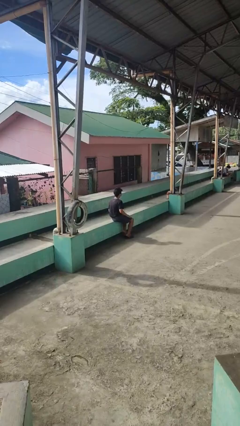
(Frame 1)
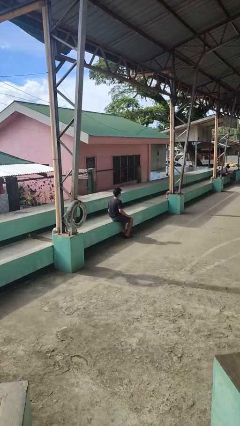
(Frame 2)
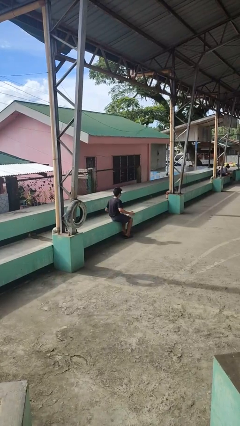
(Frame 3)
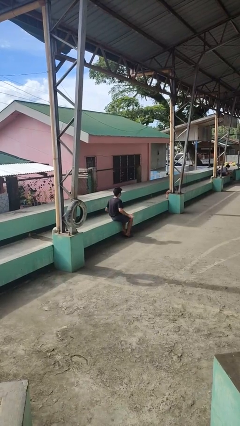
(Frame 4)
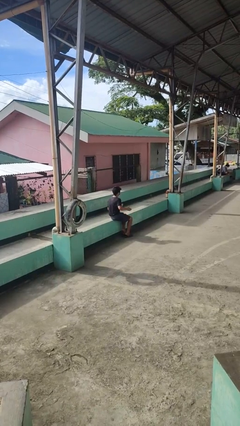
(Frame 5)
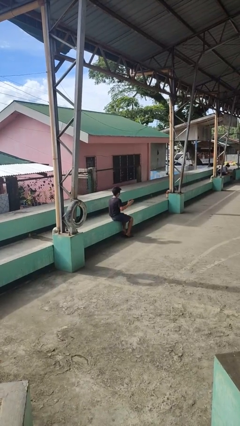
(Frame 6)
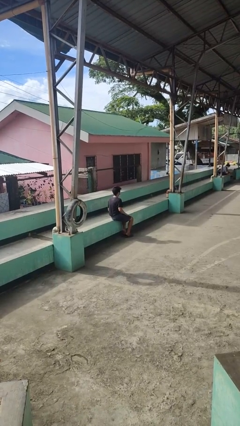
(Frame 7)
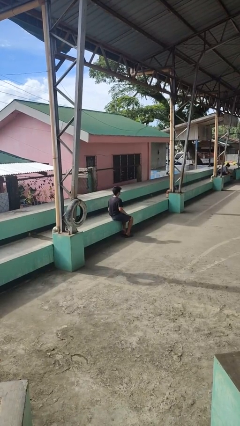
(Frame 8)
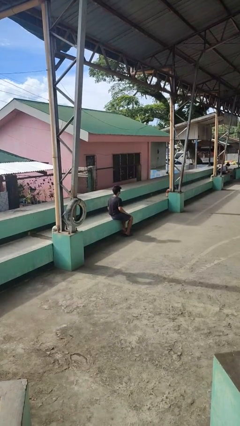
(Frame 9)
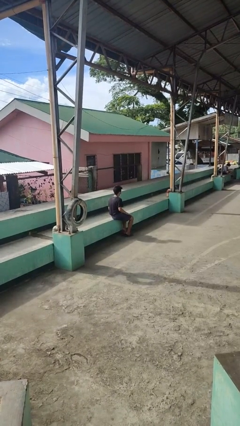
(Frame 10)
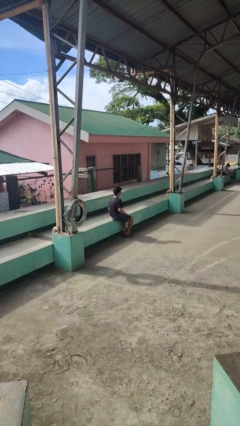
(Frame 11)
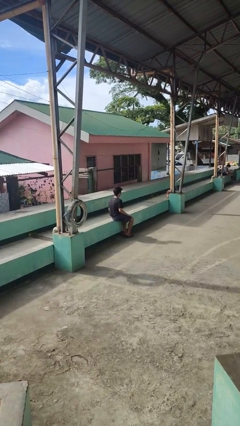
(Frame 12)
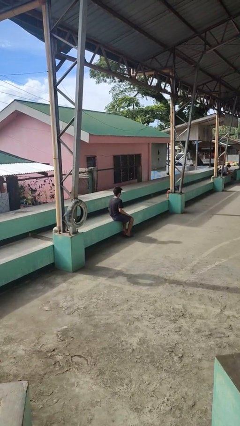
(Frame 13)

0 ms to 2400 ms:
person slaps hands on thighs

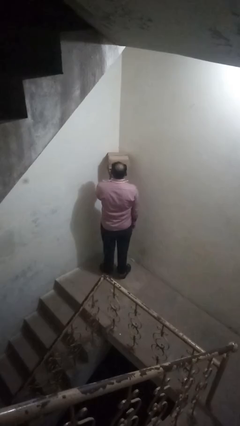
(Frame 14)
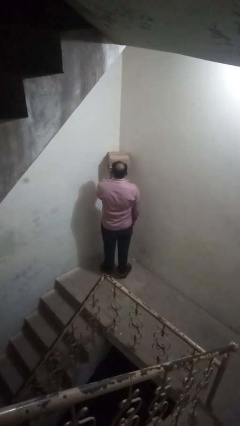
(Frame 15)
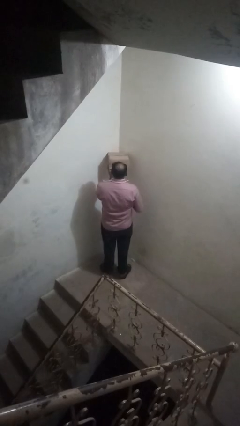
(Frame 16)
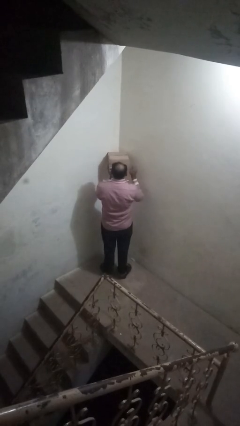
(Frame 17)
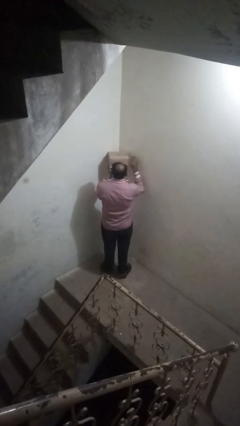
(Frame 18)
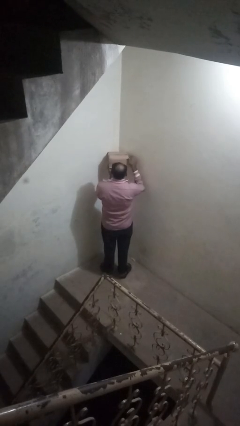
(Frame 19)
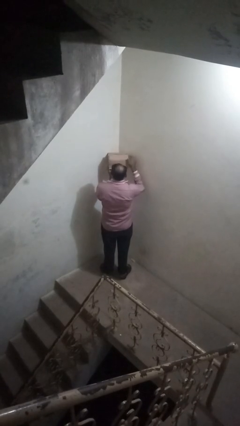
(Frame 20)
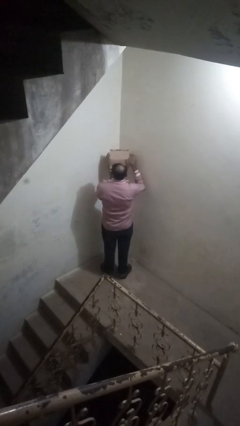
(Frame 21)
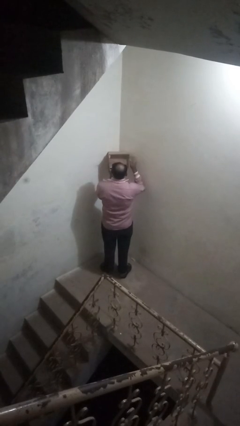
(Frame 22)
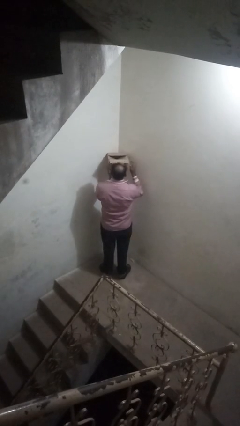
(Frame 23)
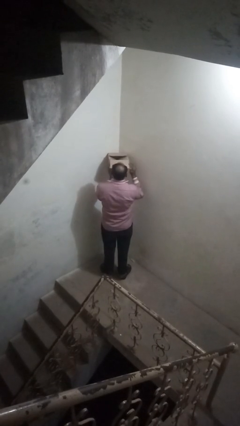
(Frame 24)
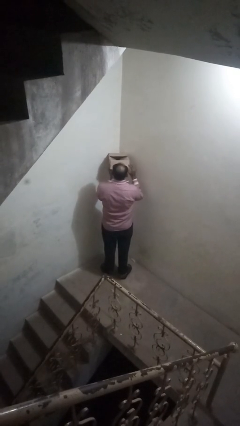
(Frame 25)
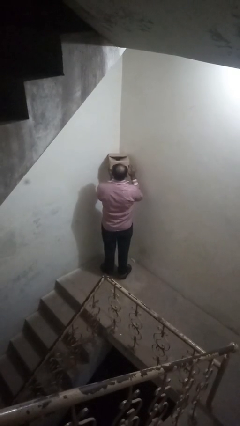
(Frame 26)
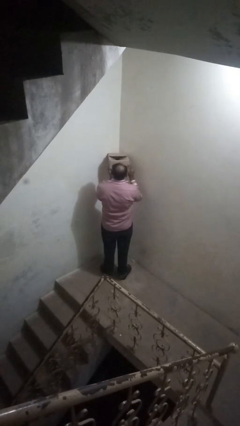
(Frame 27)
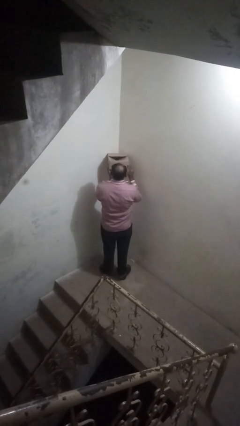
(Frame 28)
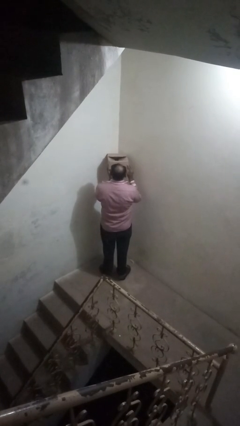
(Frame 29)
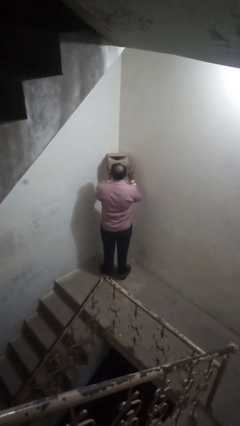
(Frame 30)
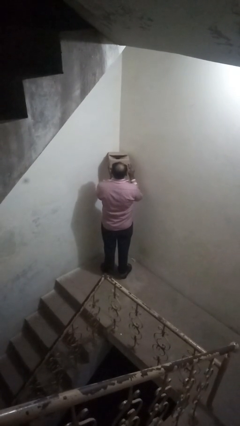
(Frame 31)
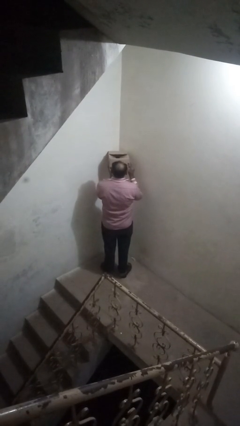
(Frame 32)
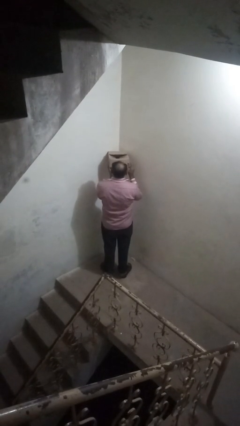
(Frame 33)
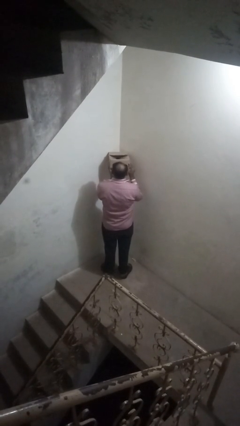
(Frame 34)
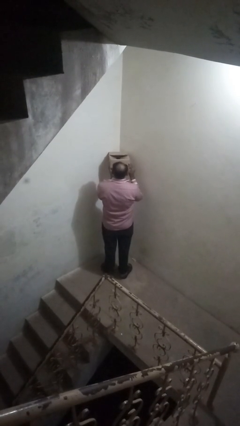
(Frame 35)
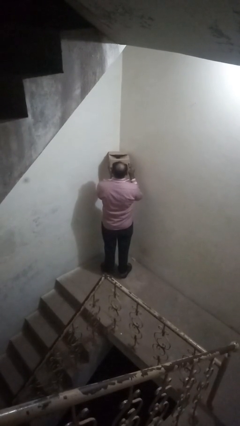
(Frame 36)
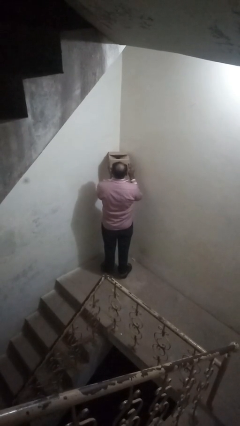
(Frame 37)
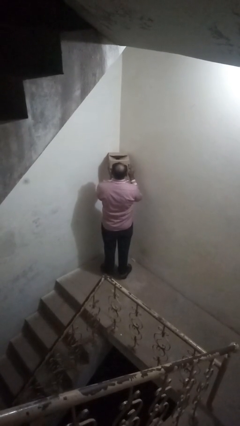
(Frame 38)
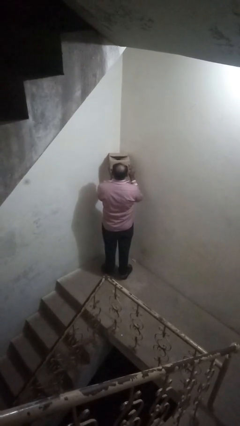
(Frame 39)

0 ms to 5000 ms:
person opens mailbox

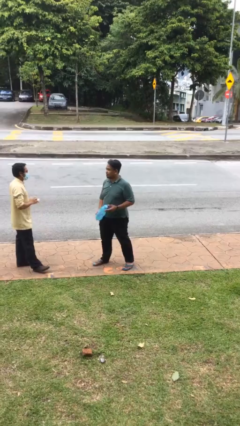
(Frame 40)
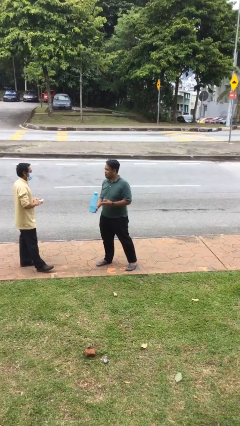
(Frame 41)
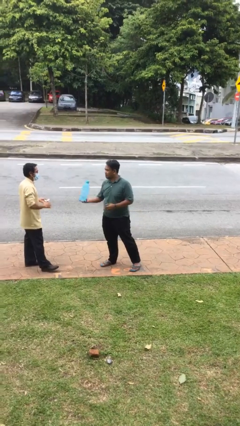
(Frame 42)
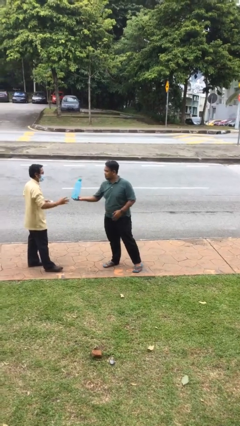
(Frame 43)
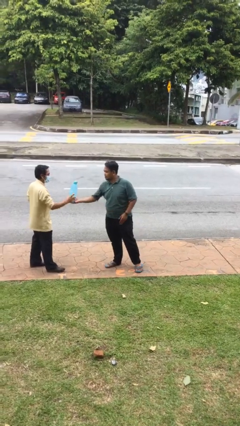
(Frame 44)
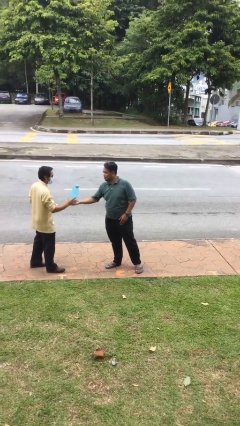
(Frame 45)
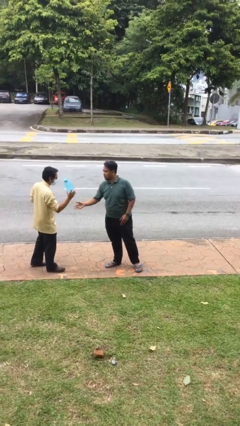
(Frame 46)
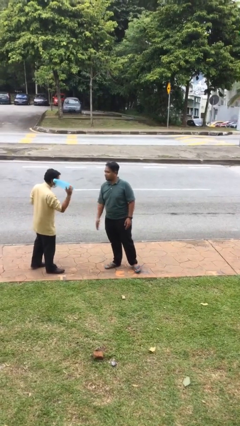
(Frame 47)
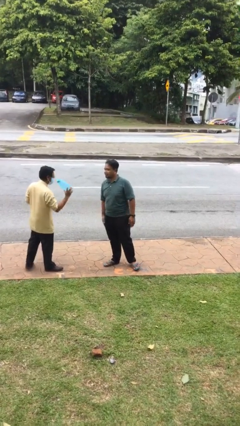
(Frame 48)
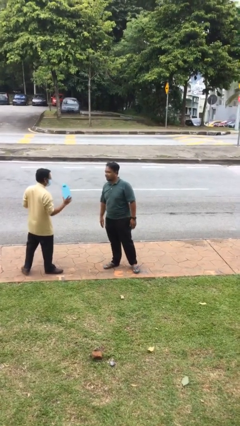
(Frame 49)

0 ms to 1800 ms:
person transfers object to person

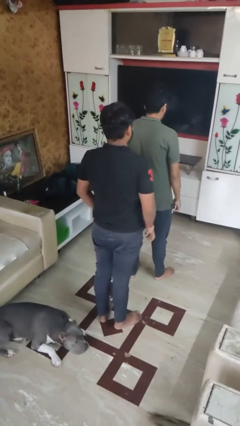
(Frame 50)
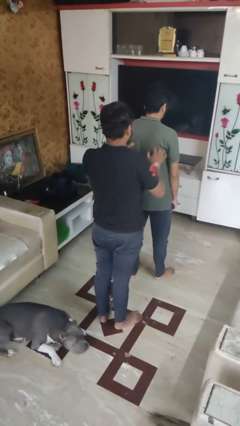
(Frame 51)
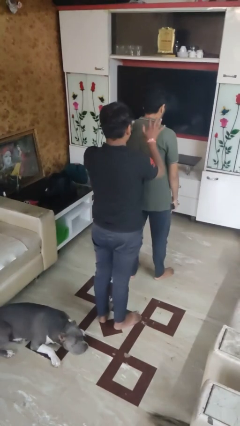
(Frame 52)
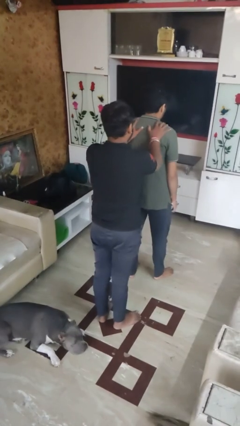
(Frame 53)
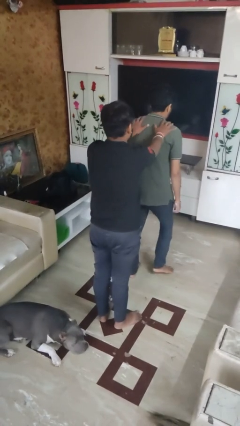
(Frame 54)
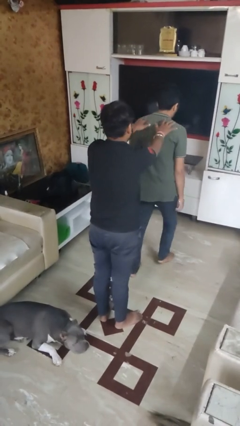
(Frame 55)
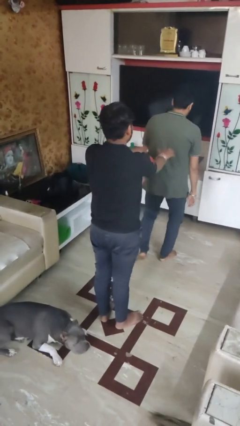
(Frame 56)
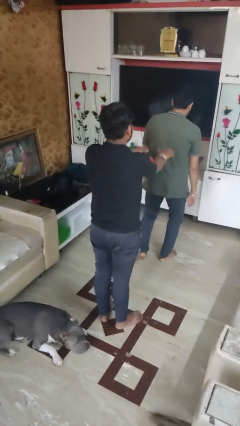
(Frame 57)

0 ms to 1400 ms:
person shoves person

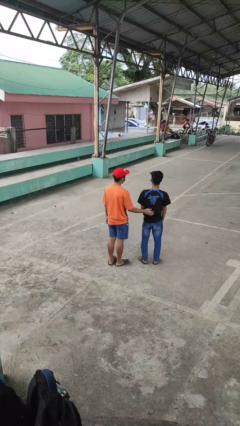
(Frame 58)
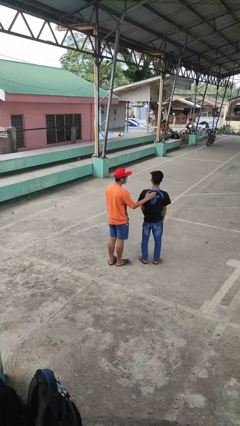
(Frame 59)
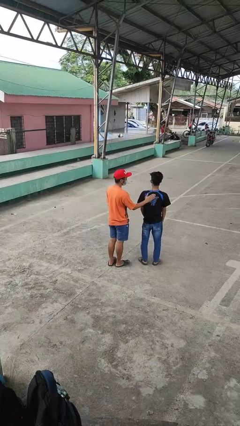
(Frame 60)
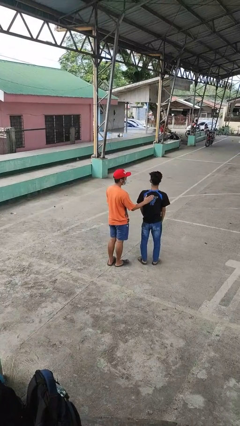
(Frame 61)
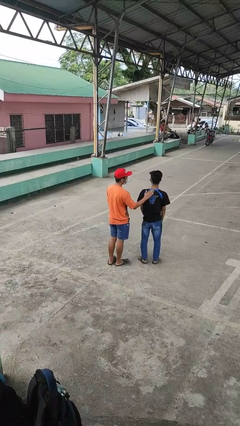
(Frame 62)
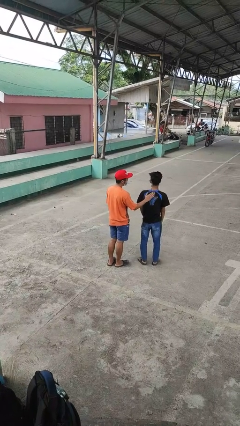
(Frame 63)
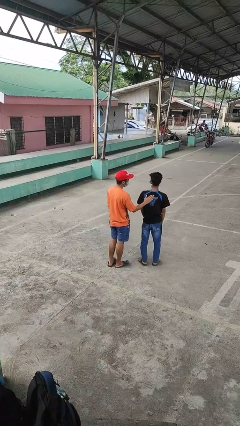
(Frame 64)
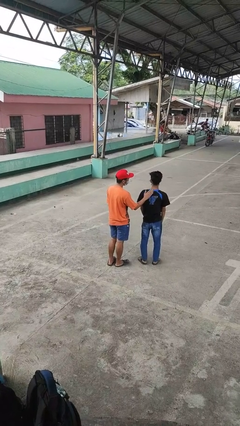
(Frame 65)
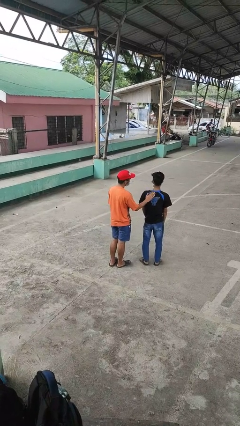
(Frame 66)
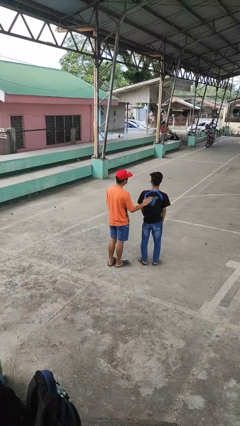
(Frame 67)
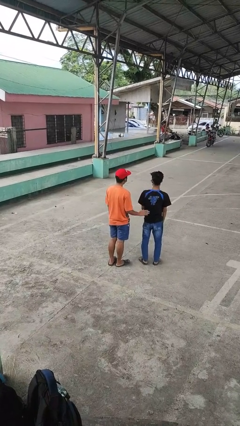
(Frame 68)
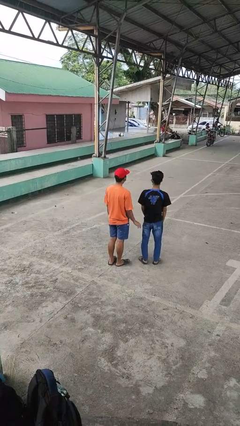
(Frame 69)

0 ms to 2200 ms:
person touches back of person

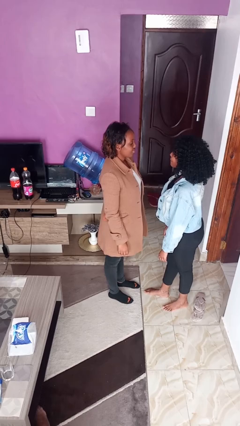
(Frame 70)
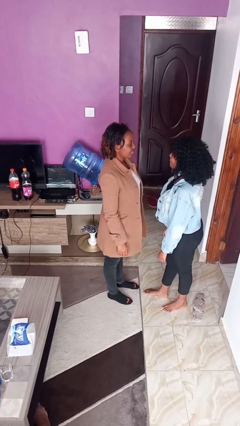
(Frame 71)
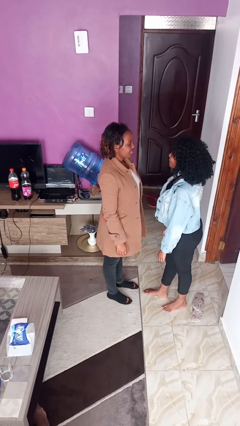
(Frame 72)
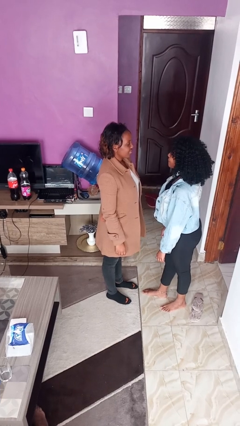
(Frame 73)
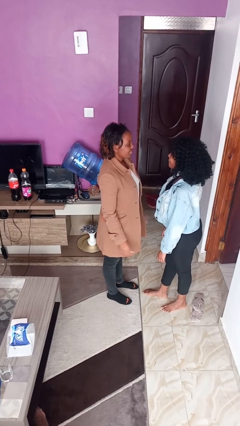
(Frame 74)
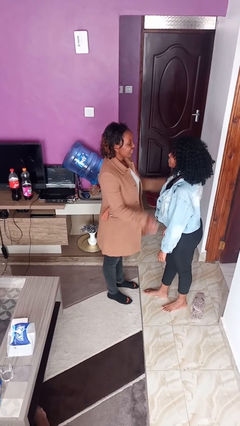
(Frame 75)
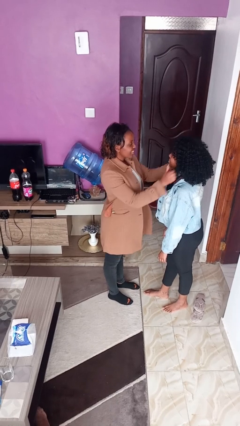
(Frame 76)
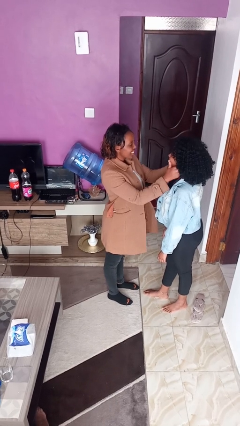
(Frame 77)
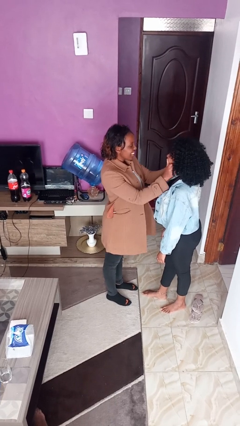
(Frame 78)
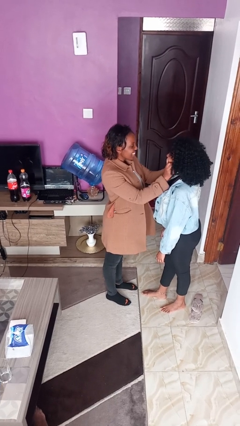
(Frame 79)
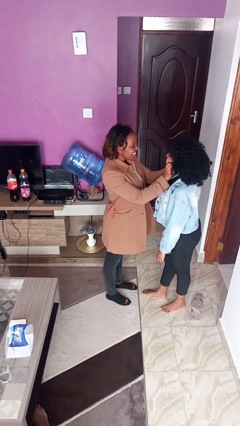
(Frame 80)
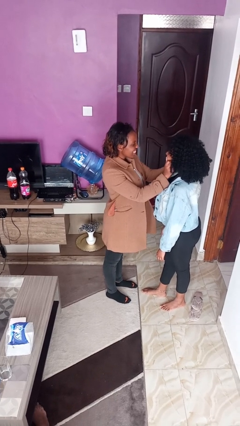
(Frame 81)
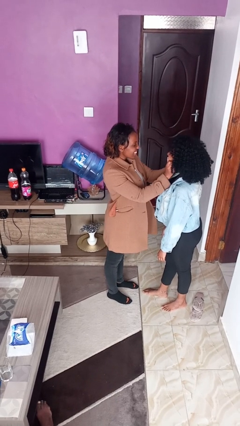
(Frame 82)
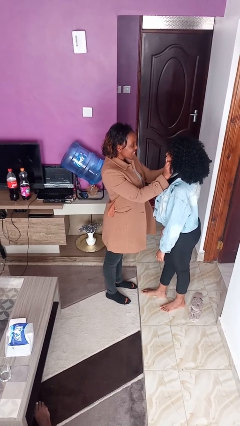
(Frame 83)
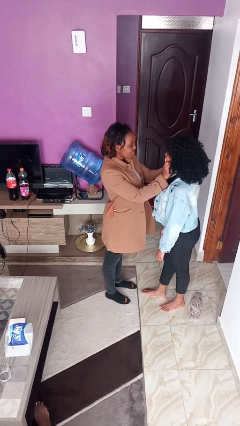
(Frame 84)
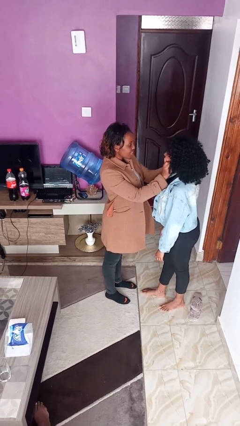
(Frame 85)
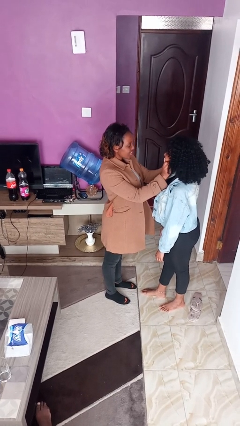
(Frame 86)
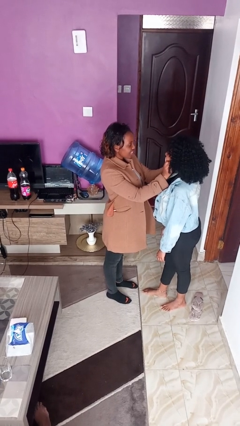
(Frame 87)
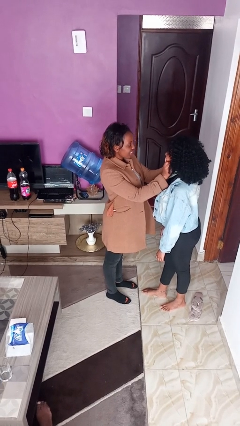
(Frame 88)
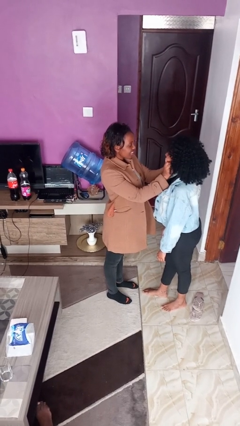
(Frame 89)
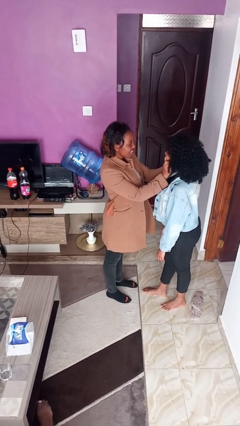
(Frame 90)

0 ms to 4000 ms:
person touches face of person

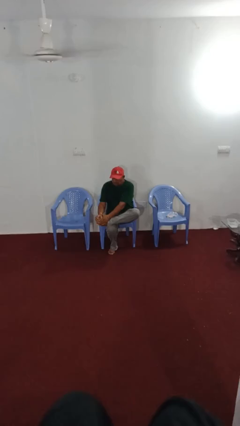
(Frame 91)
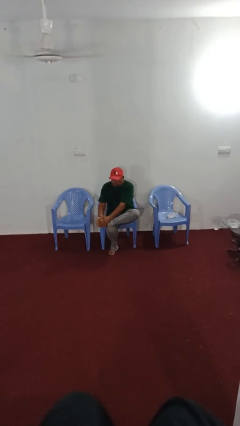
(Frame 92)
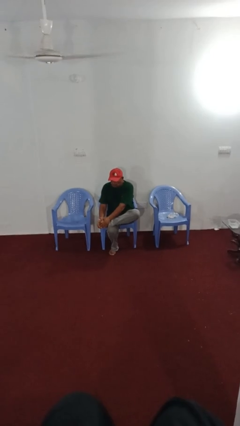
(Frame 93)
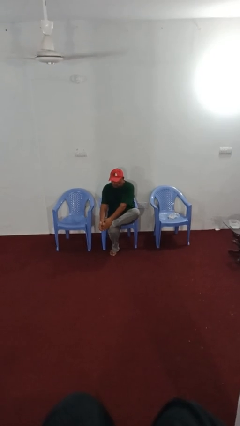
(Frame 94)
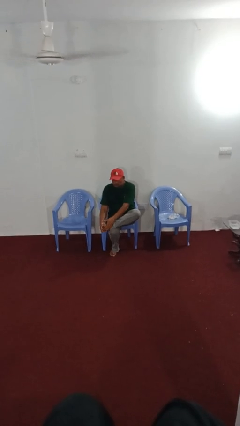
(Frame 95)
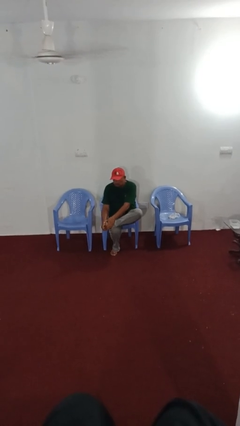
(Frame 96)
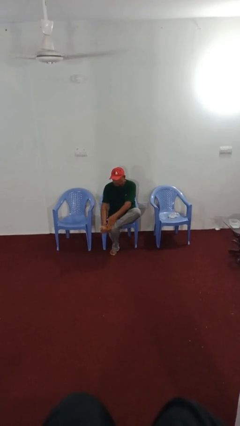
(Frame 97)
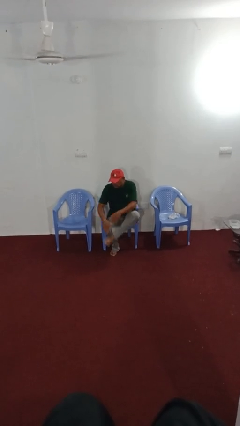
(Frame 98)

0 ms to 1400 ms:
person stubs toe
